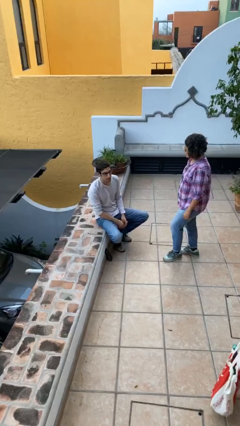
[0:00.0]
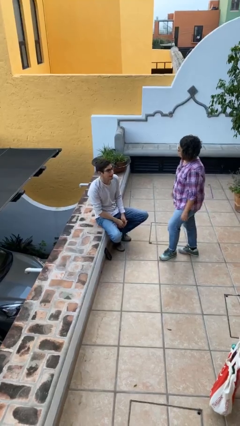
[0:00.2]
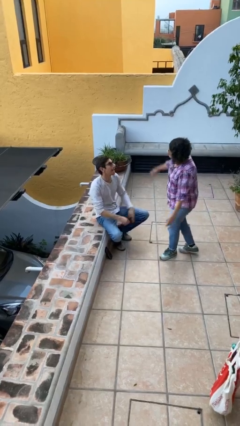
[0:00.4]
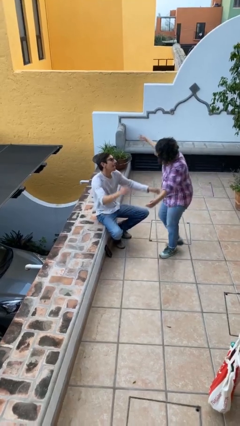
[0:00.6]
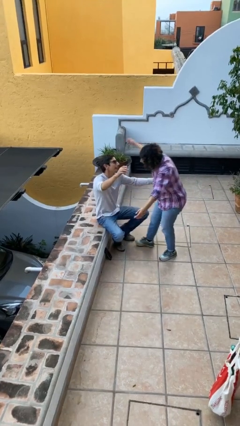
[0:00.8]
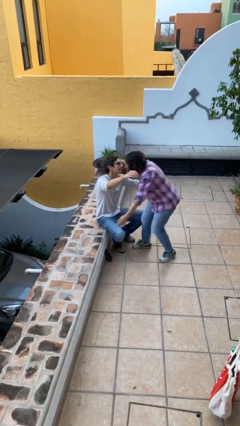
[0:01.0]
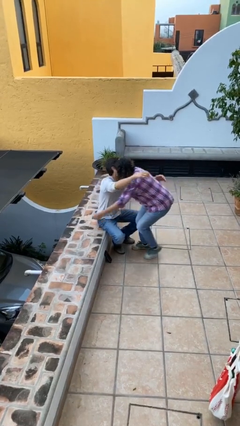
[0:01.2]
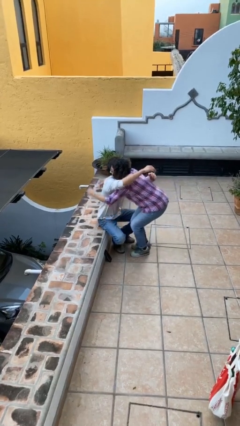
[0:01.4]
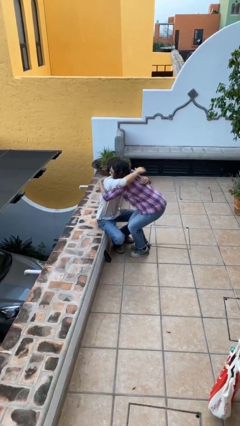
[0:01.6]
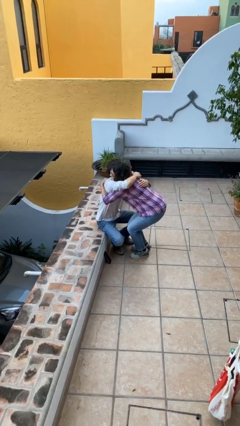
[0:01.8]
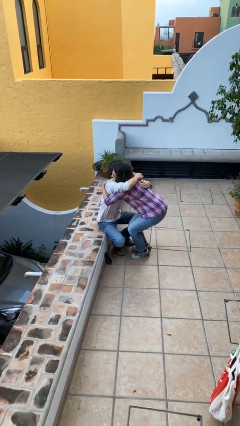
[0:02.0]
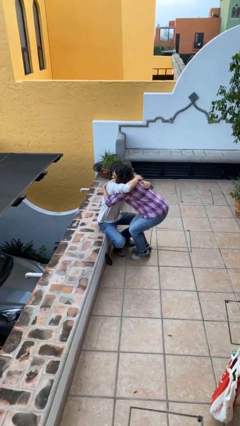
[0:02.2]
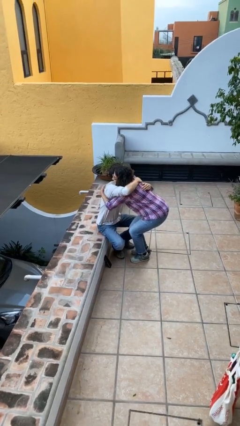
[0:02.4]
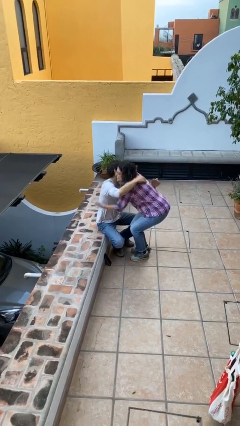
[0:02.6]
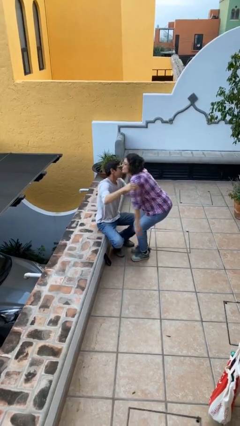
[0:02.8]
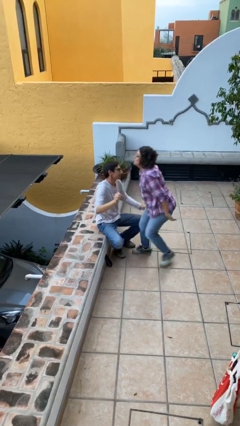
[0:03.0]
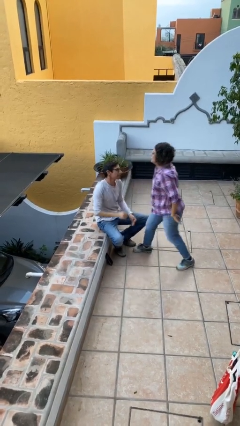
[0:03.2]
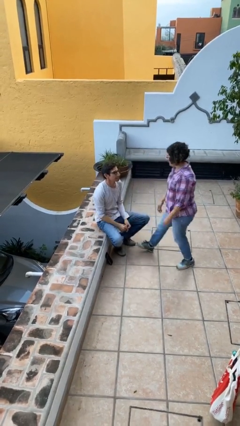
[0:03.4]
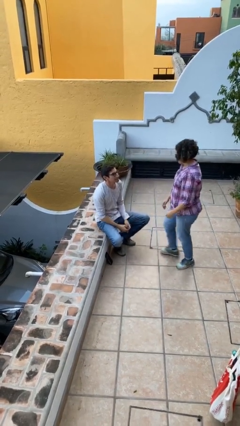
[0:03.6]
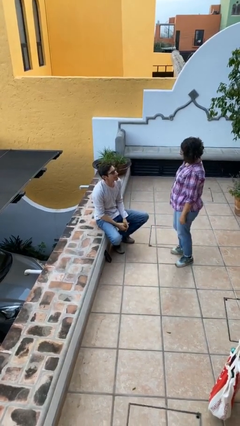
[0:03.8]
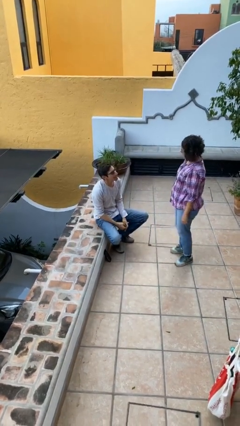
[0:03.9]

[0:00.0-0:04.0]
person embraces person

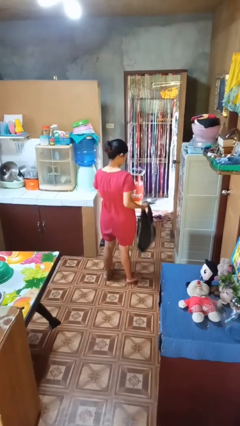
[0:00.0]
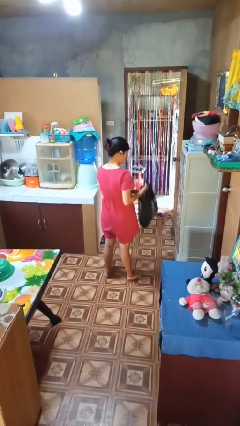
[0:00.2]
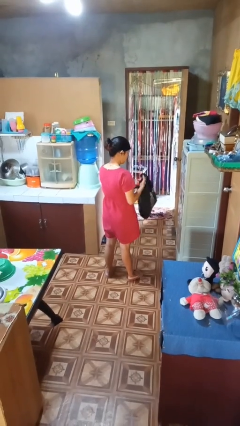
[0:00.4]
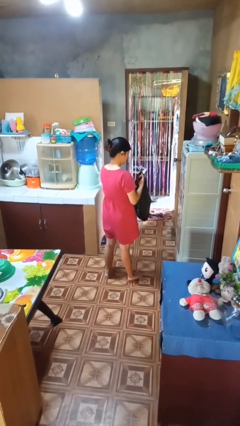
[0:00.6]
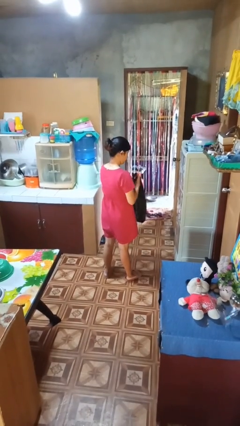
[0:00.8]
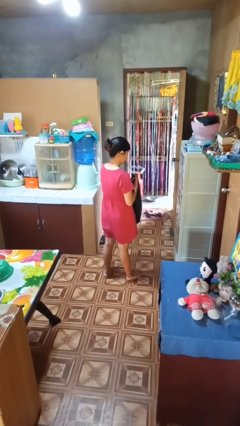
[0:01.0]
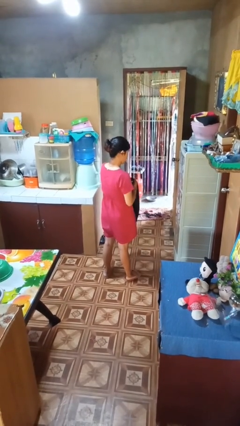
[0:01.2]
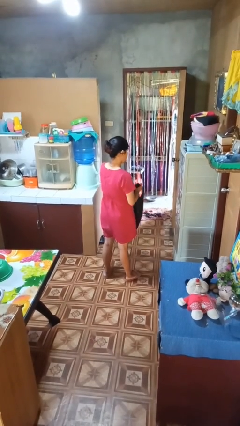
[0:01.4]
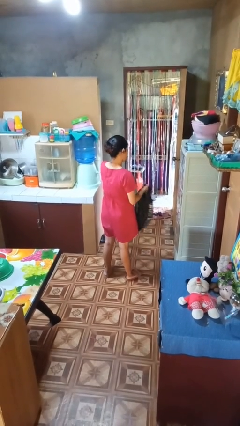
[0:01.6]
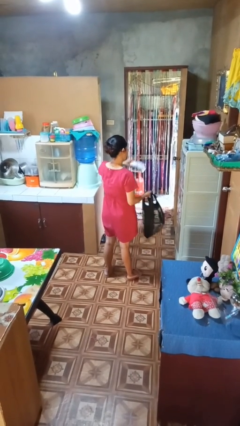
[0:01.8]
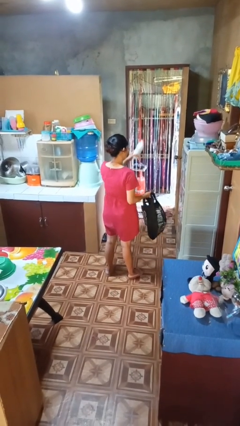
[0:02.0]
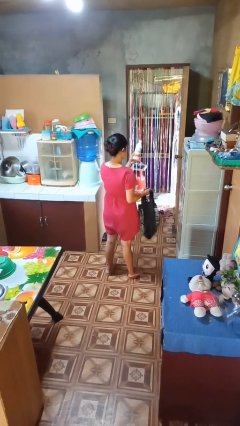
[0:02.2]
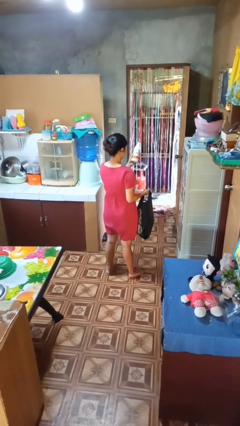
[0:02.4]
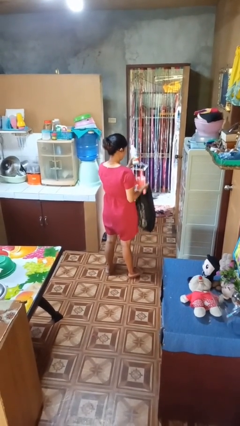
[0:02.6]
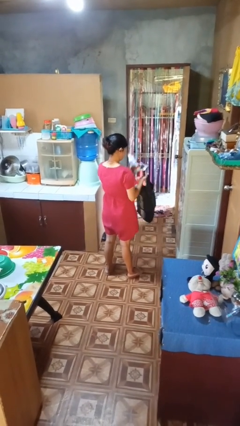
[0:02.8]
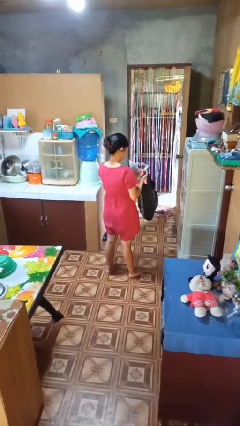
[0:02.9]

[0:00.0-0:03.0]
person takes object from bag

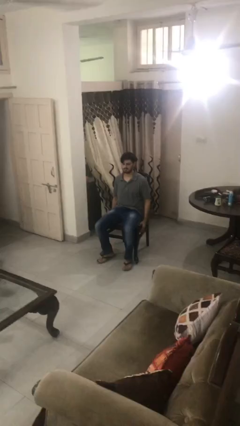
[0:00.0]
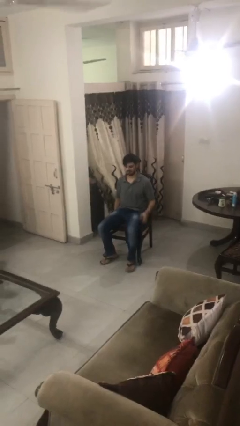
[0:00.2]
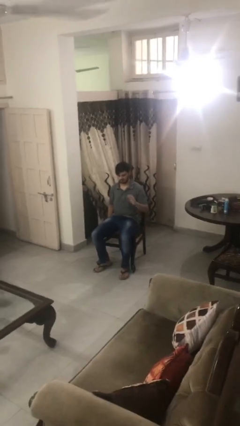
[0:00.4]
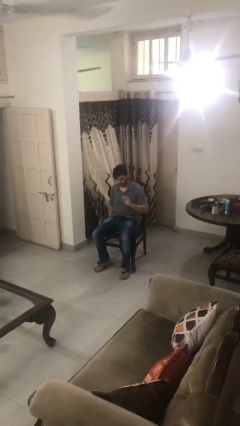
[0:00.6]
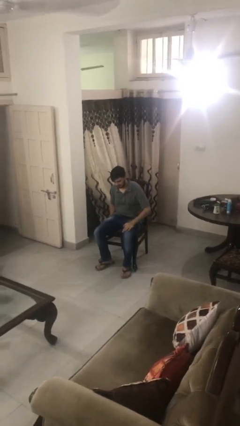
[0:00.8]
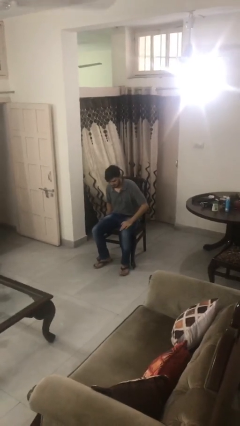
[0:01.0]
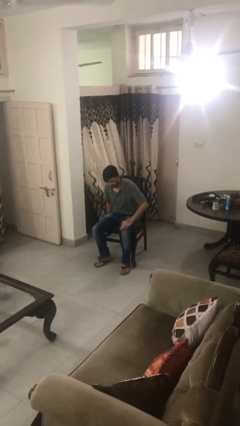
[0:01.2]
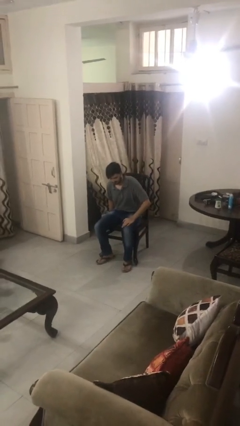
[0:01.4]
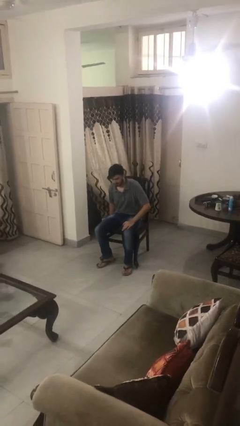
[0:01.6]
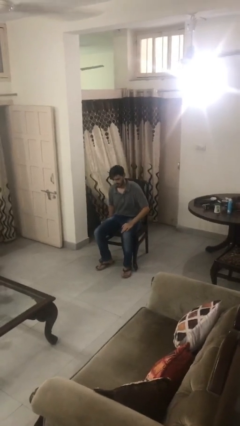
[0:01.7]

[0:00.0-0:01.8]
person slaps hands on thighs

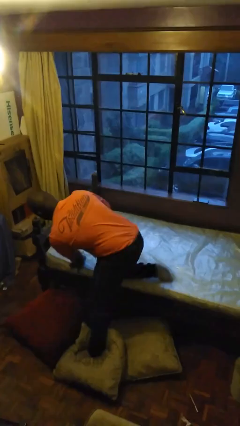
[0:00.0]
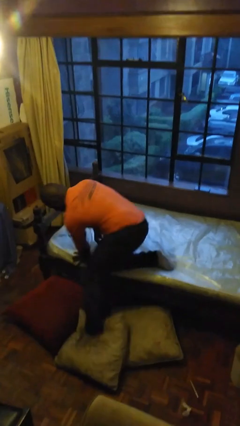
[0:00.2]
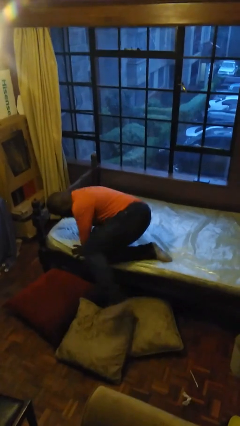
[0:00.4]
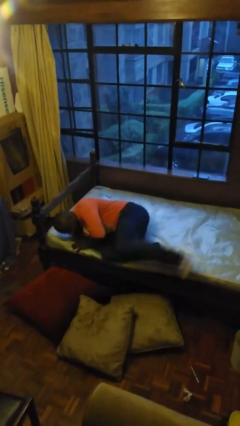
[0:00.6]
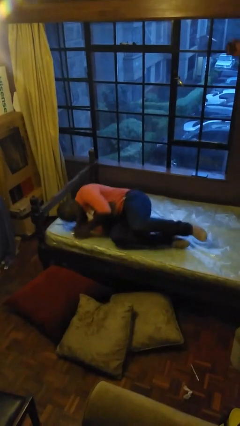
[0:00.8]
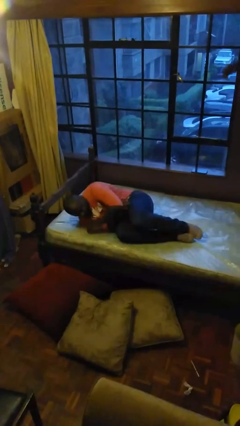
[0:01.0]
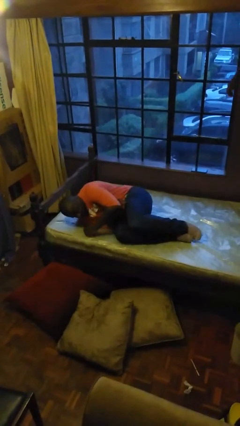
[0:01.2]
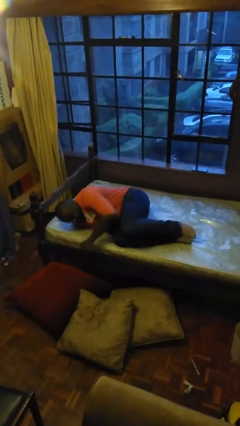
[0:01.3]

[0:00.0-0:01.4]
person lies down on bed

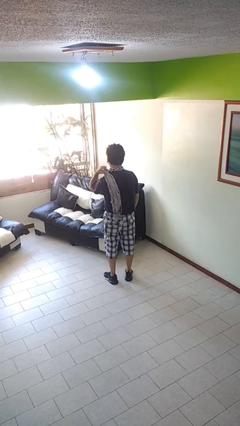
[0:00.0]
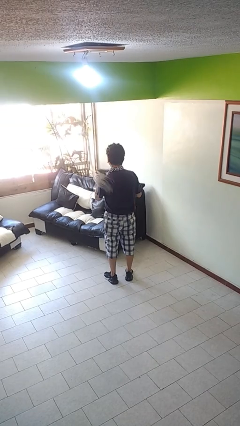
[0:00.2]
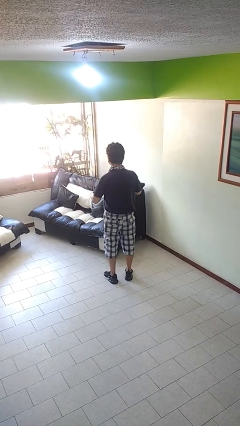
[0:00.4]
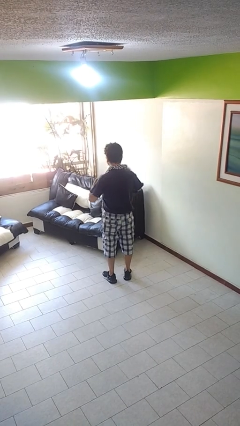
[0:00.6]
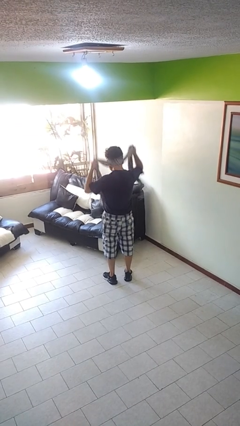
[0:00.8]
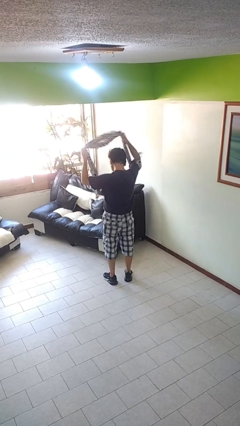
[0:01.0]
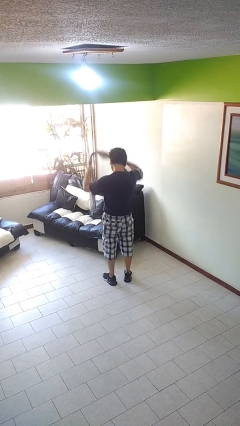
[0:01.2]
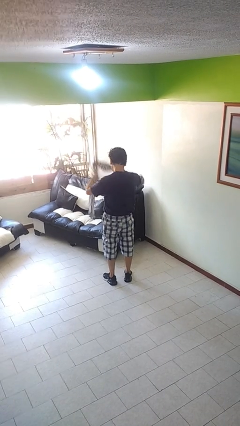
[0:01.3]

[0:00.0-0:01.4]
person takes off scarf

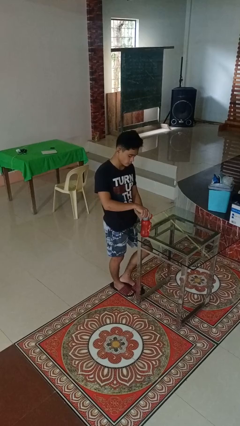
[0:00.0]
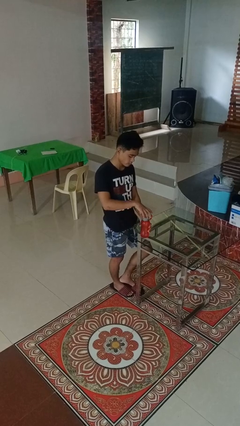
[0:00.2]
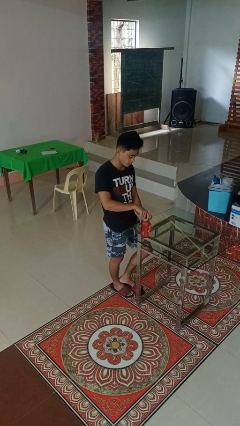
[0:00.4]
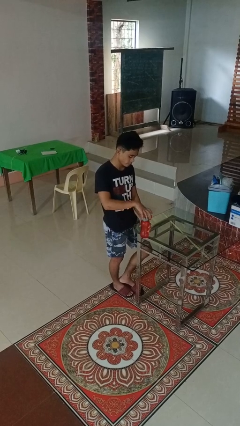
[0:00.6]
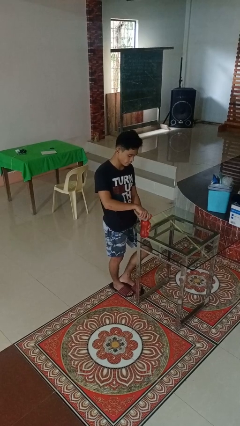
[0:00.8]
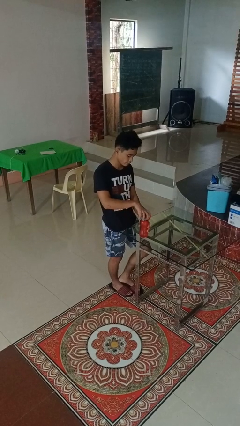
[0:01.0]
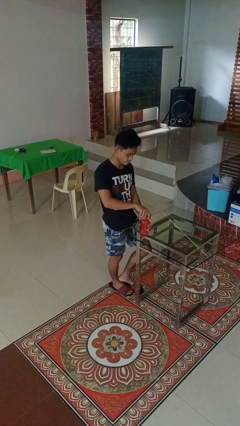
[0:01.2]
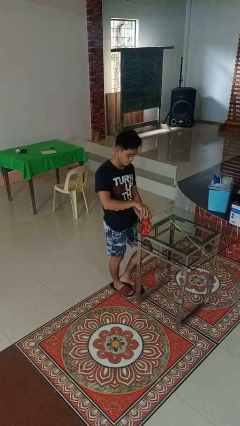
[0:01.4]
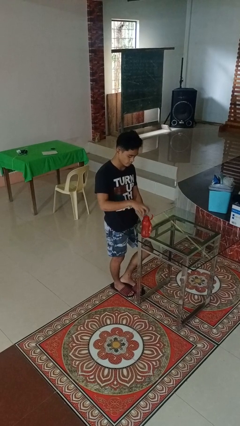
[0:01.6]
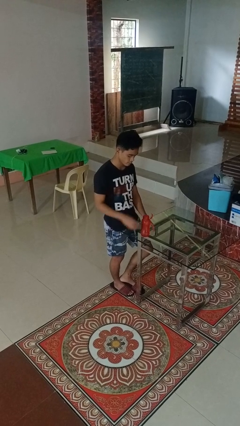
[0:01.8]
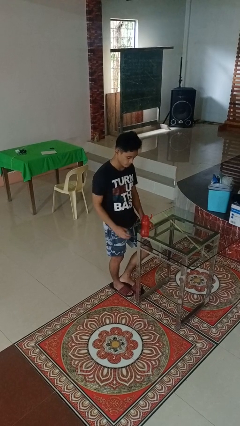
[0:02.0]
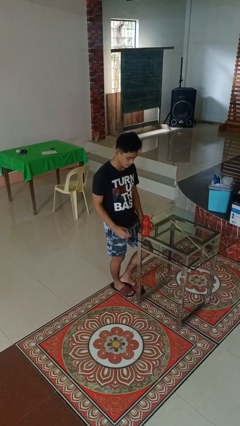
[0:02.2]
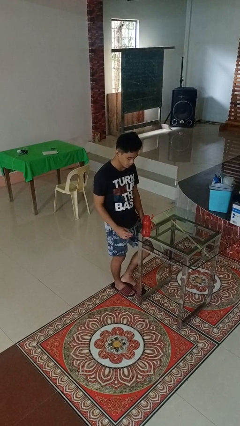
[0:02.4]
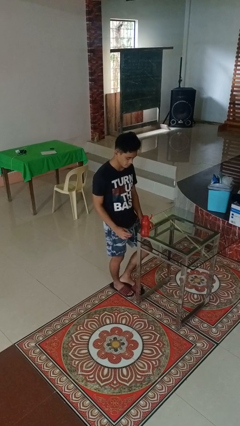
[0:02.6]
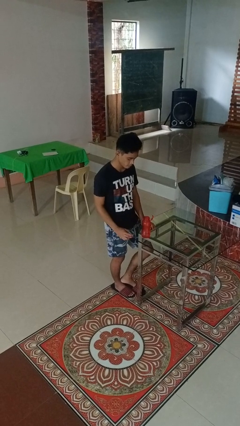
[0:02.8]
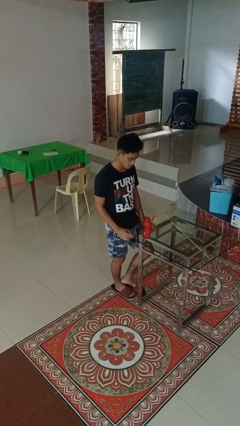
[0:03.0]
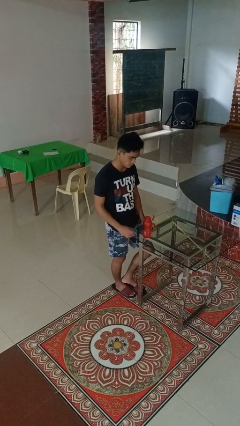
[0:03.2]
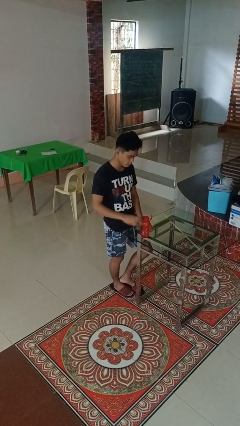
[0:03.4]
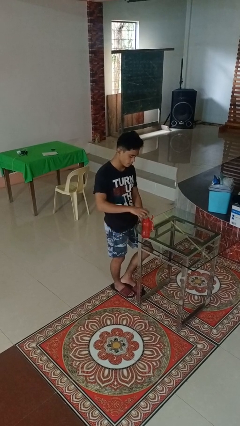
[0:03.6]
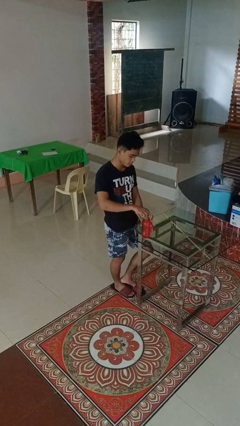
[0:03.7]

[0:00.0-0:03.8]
person unscrews lid from bottle

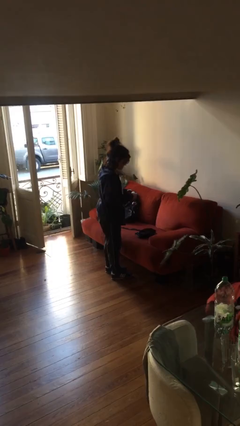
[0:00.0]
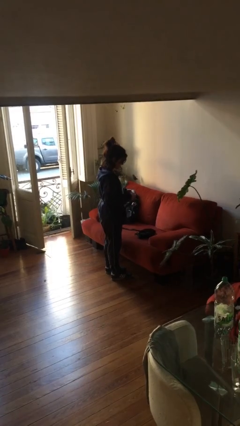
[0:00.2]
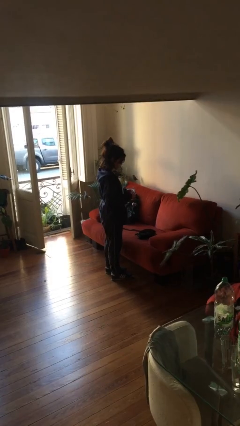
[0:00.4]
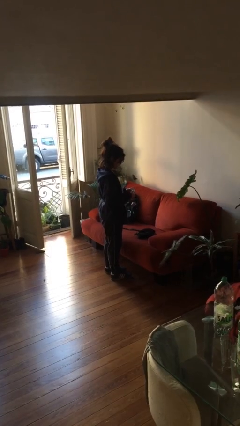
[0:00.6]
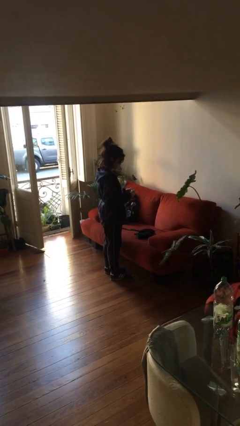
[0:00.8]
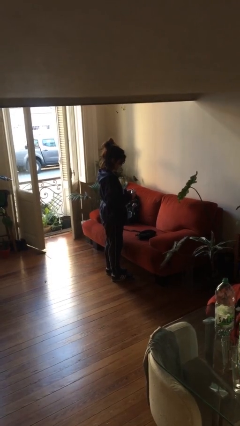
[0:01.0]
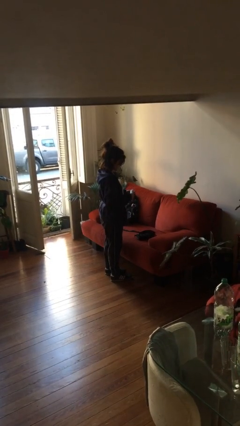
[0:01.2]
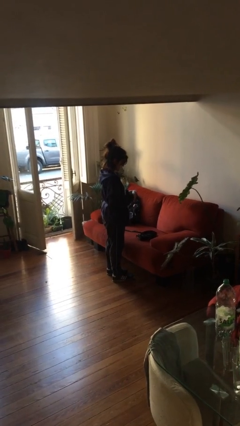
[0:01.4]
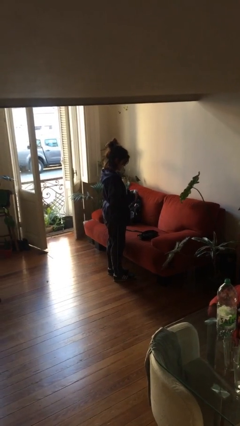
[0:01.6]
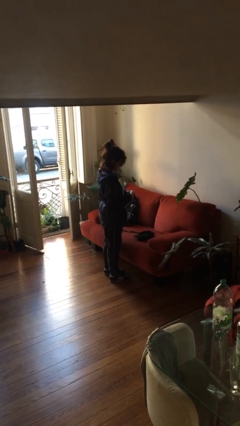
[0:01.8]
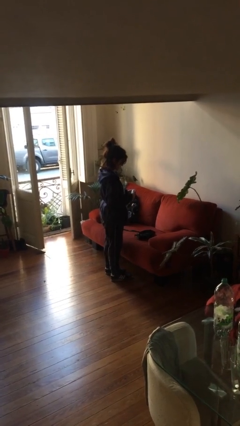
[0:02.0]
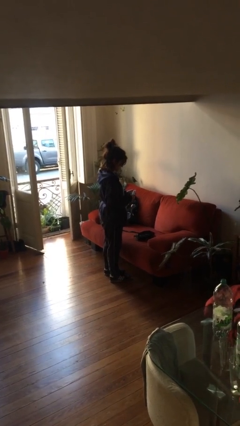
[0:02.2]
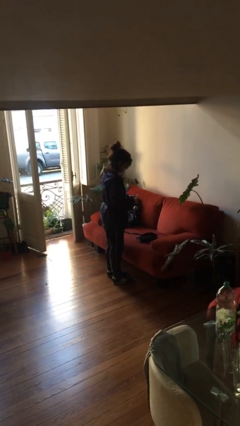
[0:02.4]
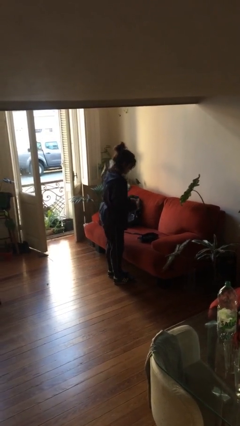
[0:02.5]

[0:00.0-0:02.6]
person takes object from purse
